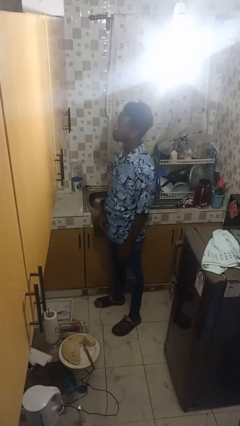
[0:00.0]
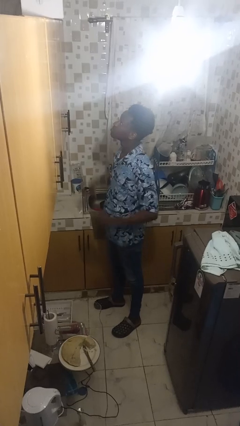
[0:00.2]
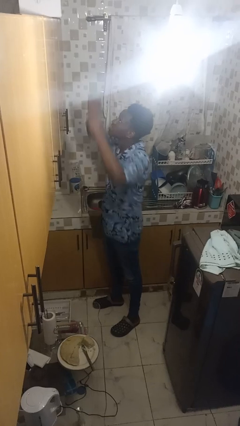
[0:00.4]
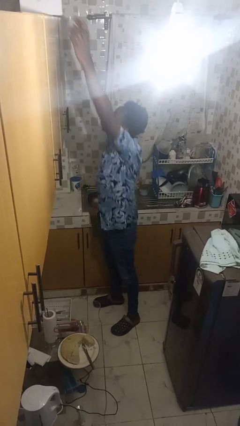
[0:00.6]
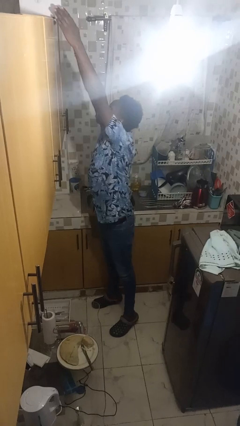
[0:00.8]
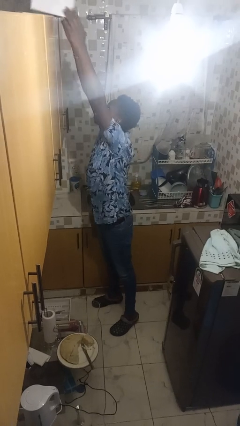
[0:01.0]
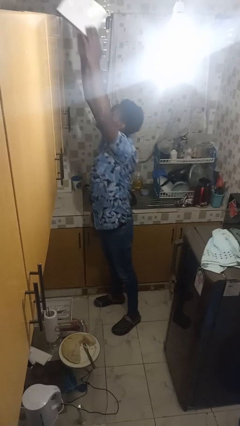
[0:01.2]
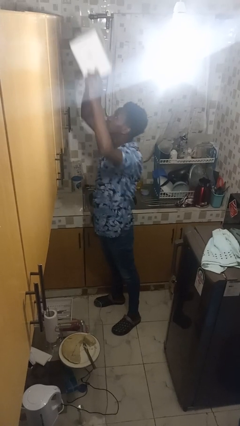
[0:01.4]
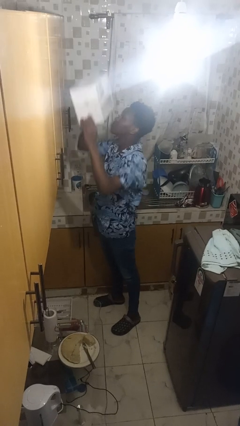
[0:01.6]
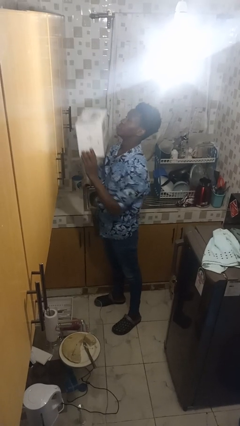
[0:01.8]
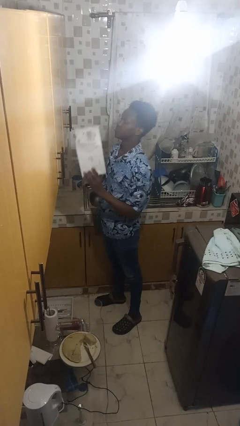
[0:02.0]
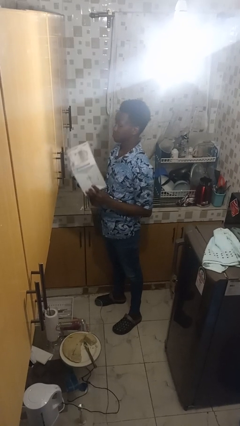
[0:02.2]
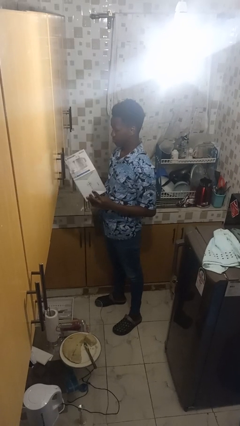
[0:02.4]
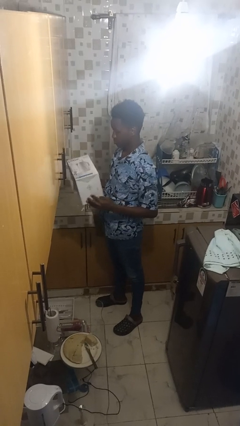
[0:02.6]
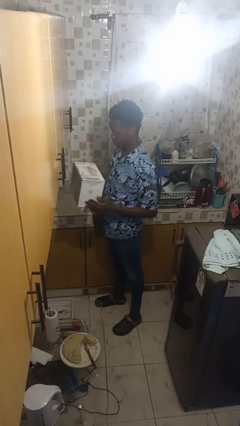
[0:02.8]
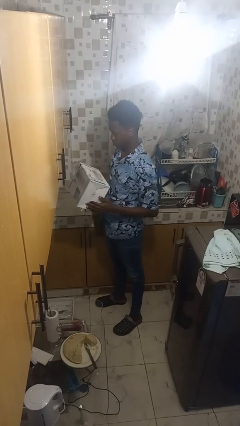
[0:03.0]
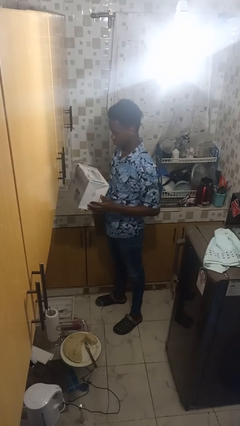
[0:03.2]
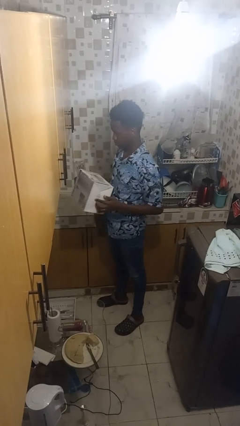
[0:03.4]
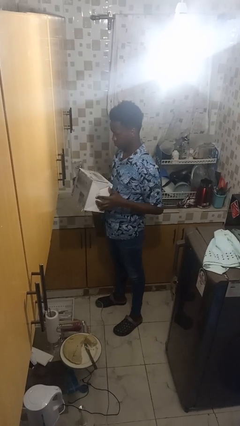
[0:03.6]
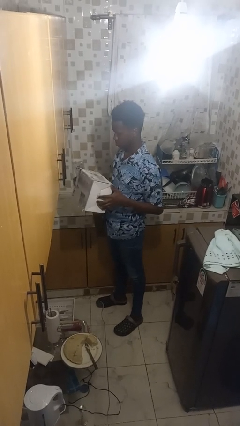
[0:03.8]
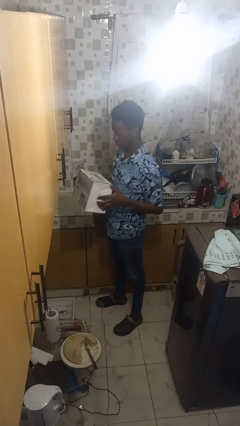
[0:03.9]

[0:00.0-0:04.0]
person picks up object from shelf

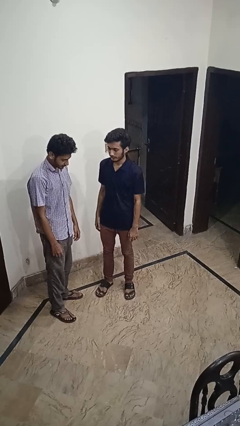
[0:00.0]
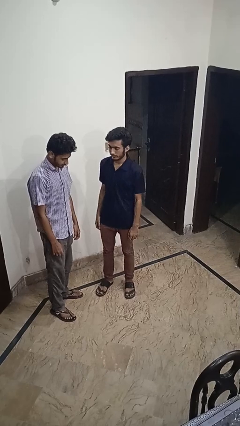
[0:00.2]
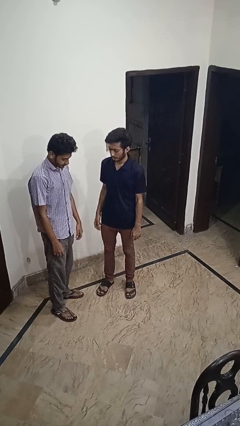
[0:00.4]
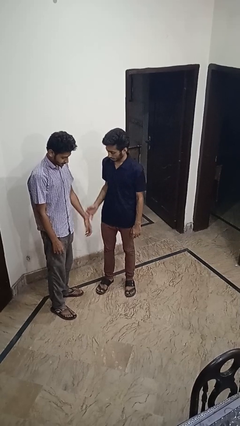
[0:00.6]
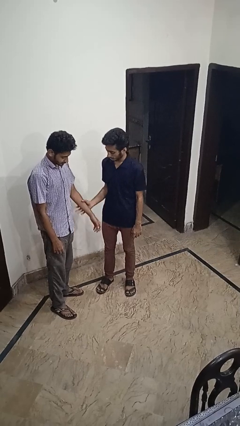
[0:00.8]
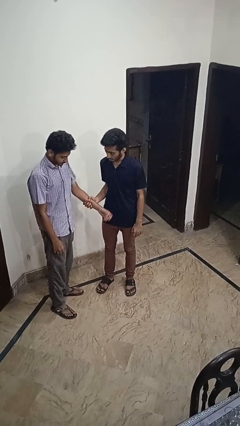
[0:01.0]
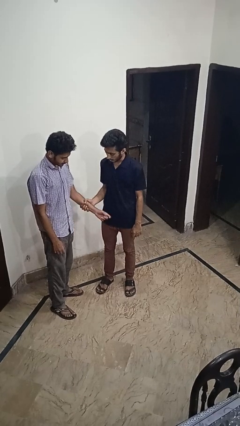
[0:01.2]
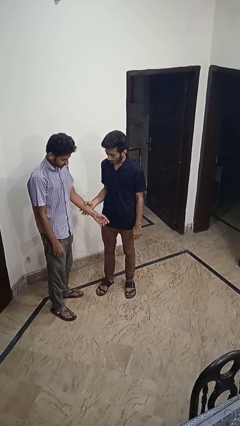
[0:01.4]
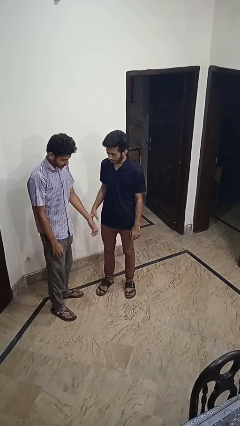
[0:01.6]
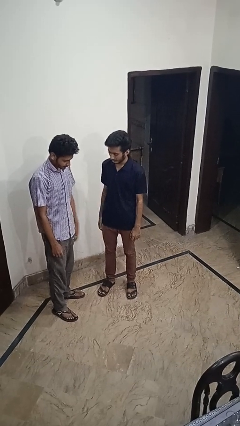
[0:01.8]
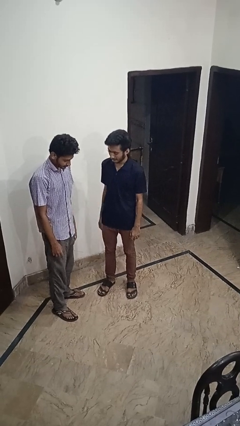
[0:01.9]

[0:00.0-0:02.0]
person grabs person by forearm

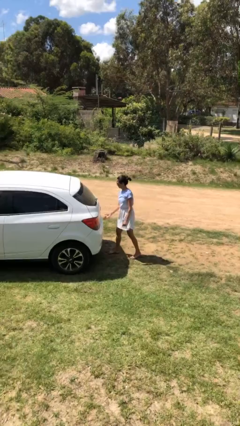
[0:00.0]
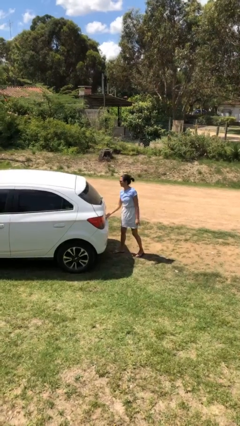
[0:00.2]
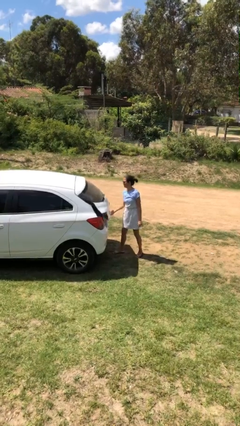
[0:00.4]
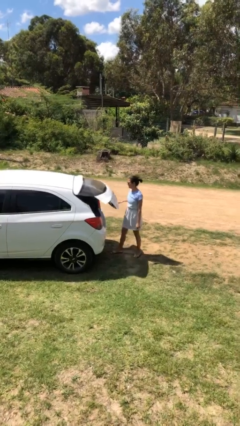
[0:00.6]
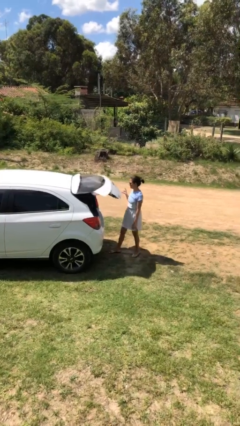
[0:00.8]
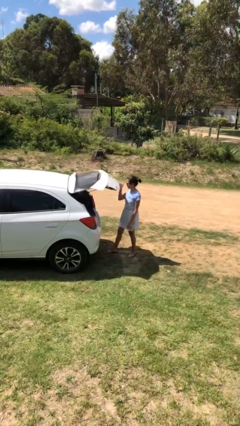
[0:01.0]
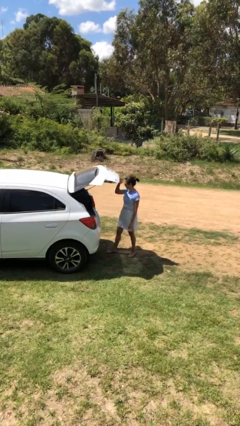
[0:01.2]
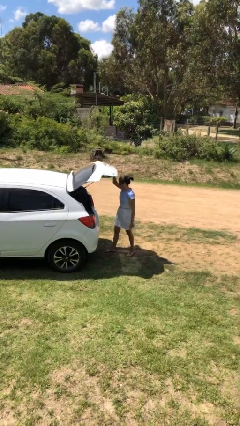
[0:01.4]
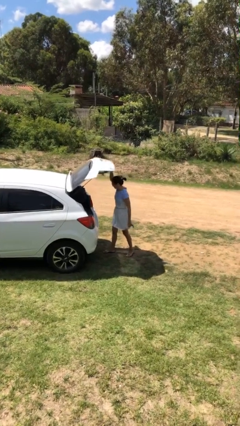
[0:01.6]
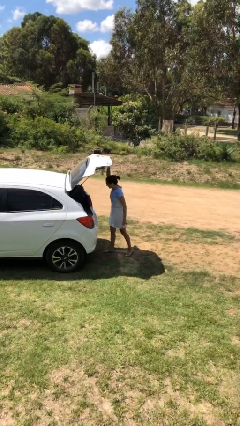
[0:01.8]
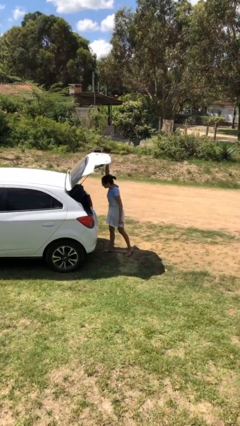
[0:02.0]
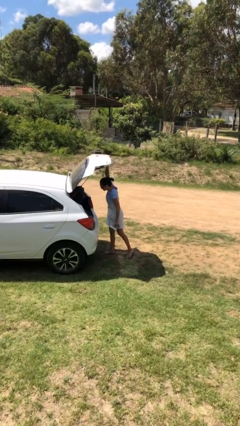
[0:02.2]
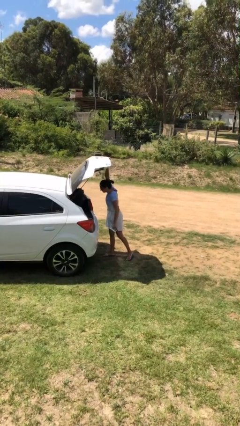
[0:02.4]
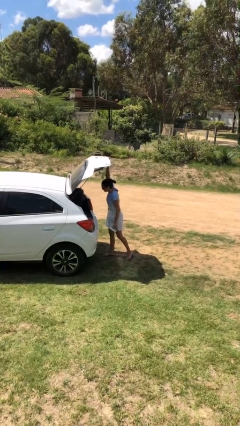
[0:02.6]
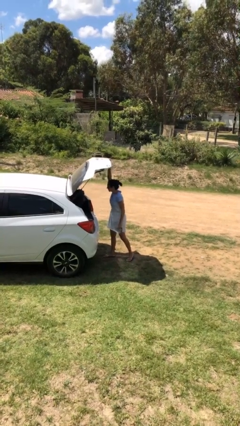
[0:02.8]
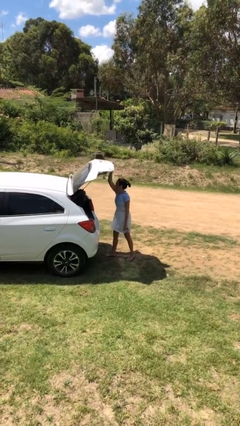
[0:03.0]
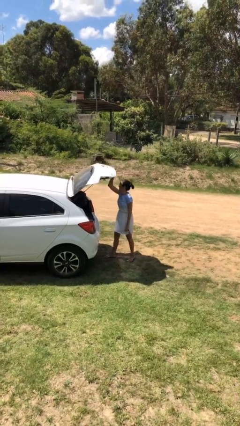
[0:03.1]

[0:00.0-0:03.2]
person opens car trunk

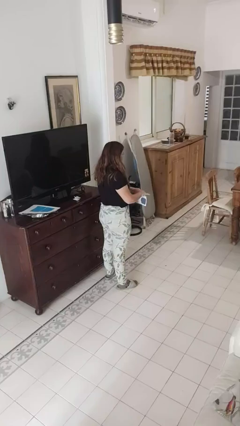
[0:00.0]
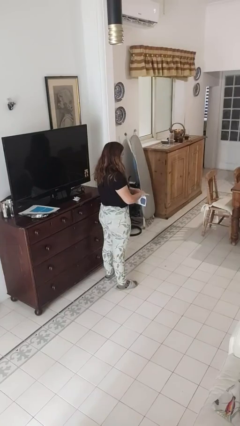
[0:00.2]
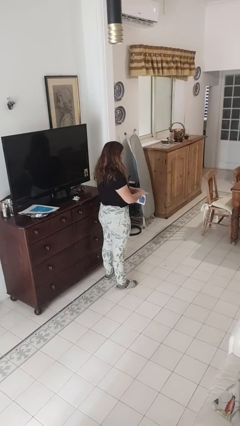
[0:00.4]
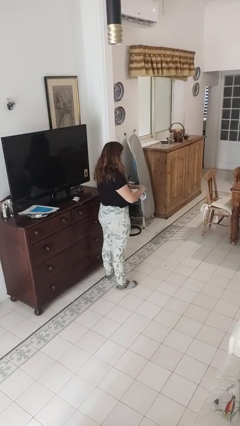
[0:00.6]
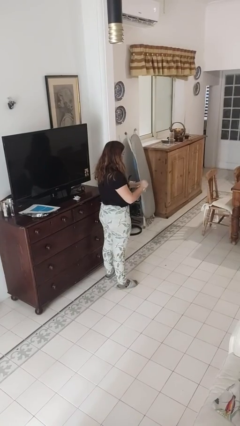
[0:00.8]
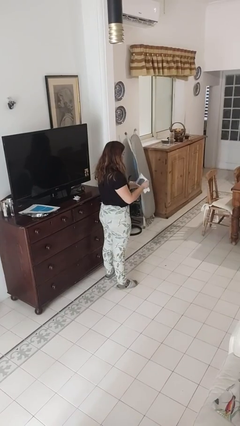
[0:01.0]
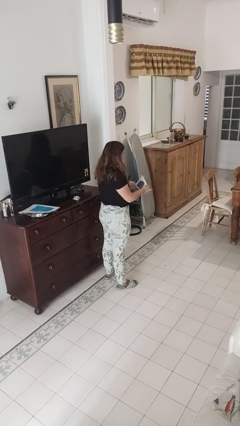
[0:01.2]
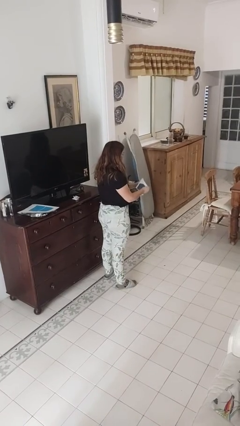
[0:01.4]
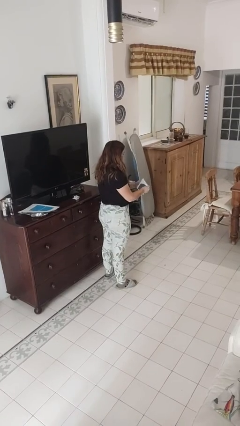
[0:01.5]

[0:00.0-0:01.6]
person tears paper

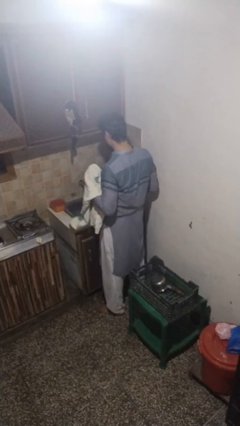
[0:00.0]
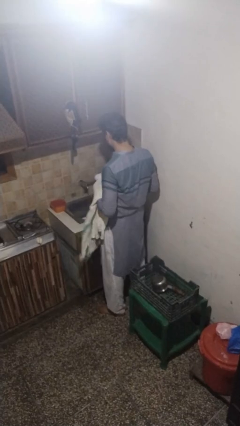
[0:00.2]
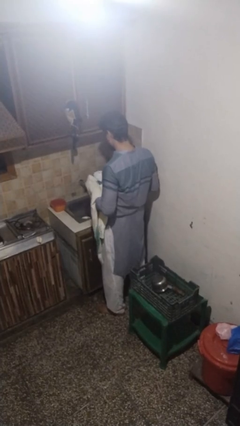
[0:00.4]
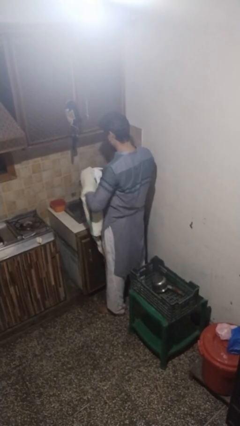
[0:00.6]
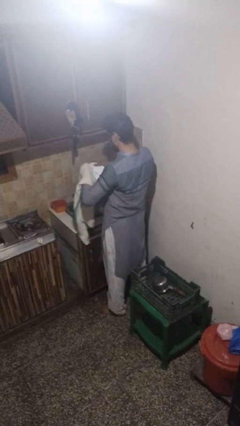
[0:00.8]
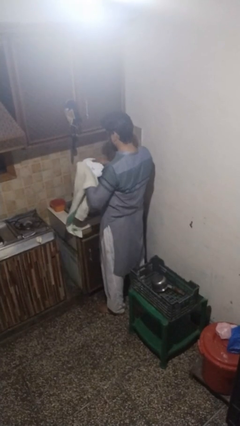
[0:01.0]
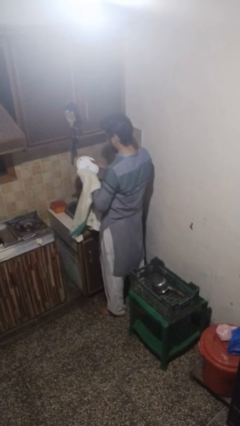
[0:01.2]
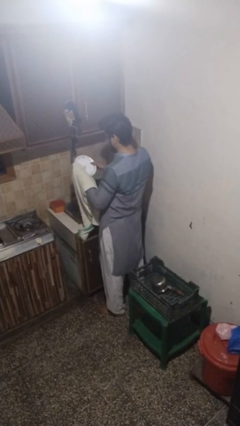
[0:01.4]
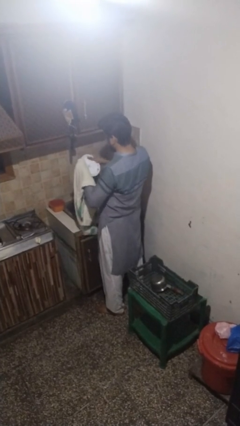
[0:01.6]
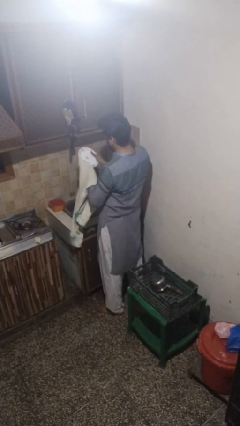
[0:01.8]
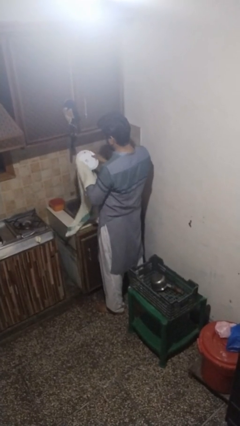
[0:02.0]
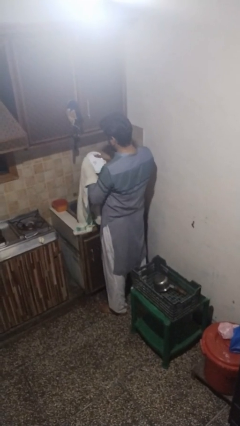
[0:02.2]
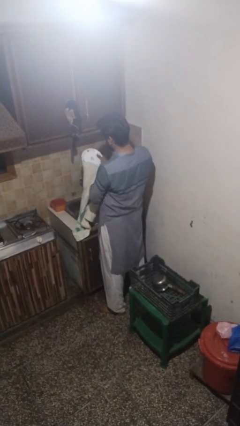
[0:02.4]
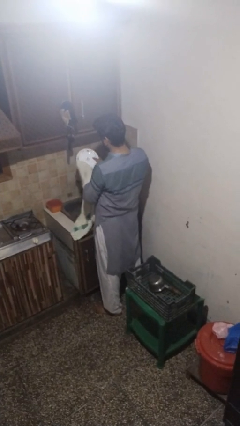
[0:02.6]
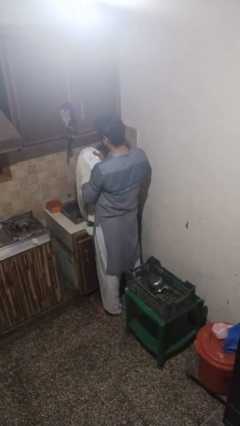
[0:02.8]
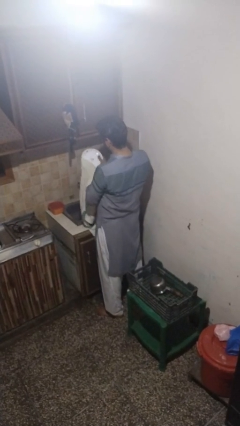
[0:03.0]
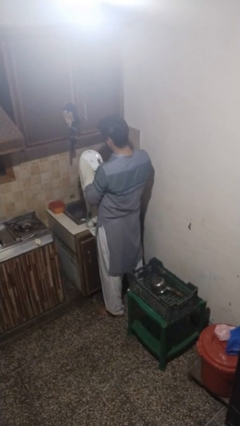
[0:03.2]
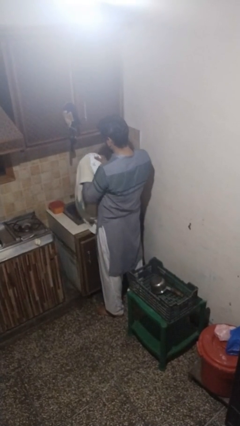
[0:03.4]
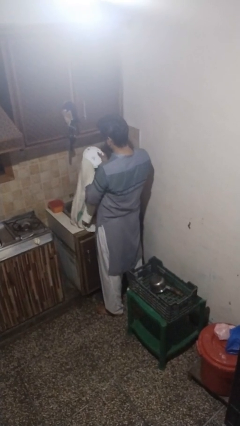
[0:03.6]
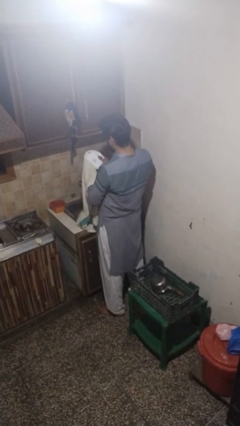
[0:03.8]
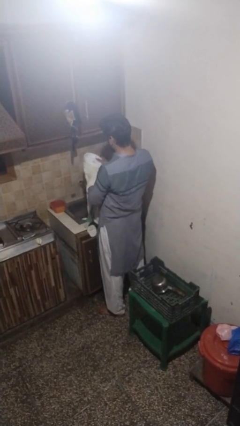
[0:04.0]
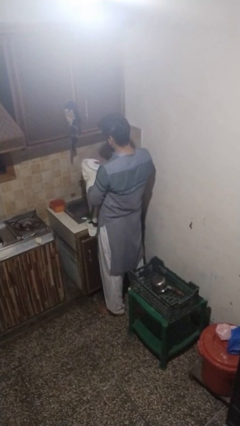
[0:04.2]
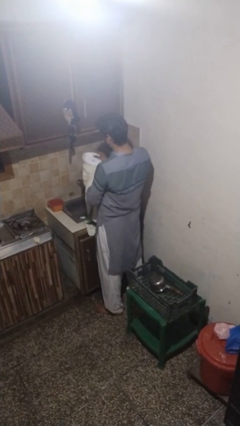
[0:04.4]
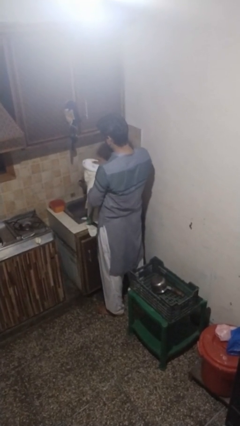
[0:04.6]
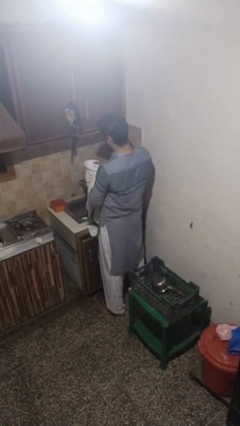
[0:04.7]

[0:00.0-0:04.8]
person dries dish

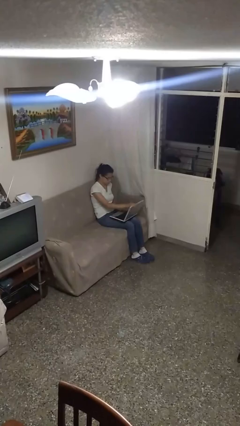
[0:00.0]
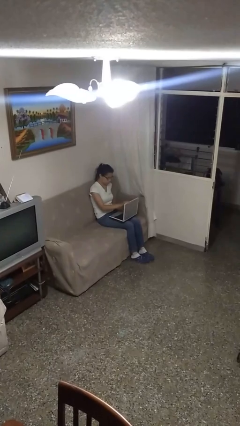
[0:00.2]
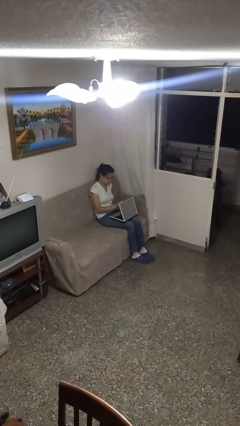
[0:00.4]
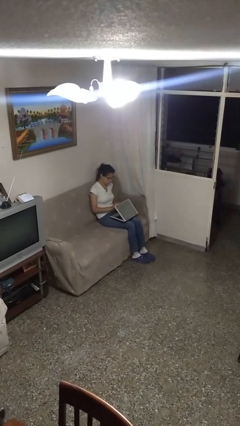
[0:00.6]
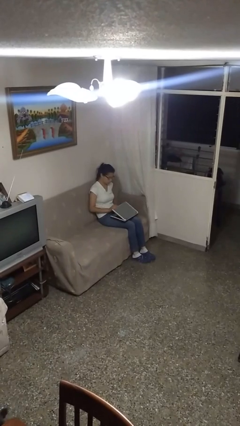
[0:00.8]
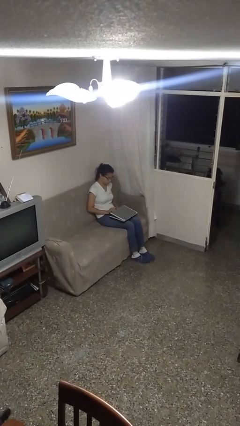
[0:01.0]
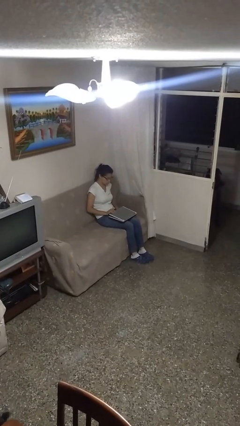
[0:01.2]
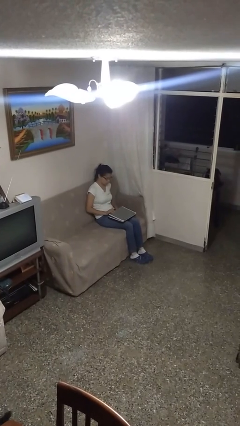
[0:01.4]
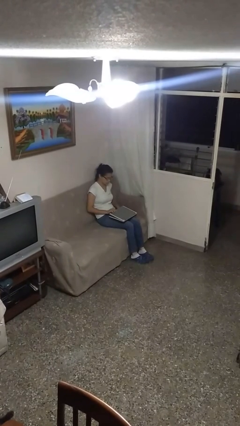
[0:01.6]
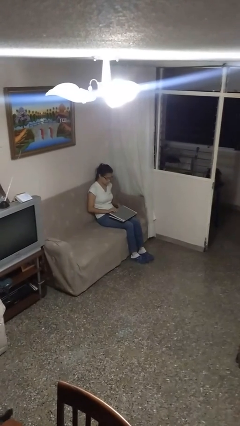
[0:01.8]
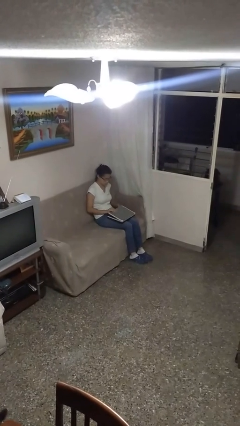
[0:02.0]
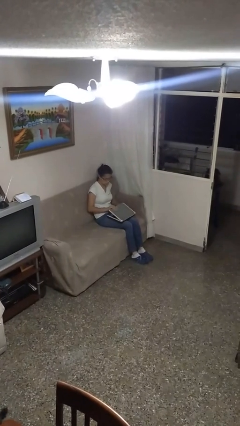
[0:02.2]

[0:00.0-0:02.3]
person closes laptop

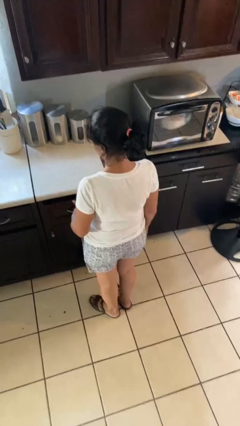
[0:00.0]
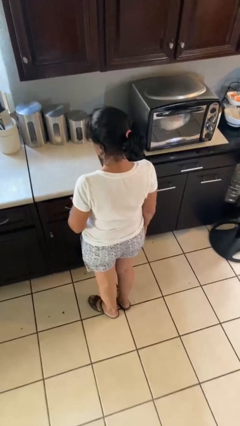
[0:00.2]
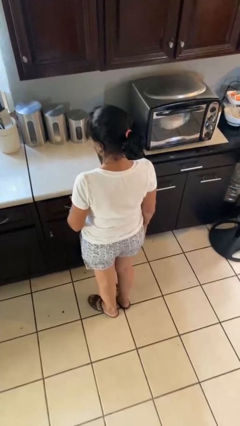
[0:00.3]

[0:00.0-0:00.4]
person closes kitchen drawer
